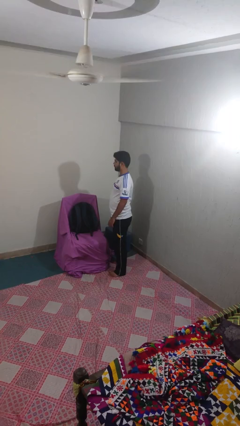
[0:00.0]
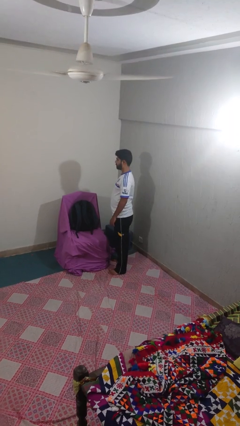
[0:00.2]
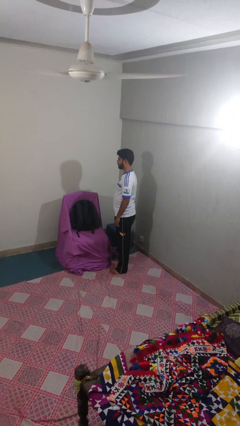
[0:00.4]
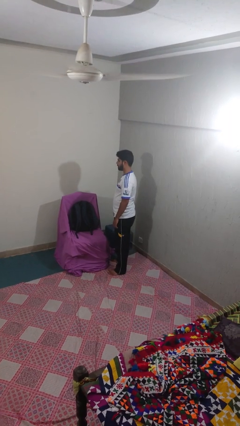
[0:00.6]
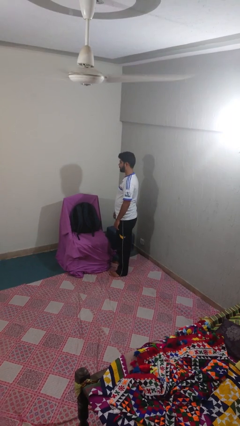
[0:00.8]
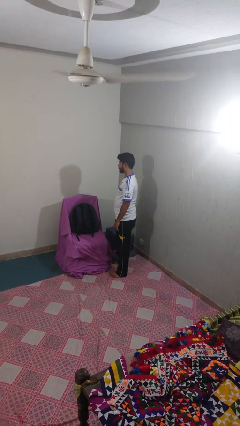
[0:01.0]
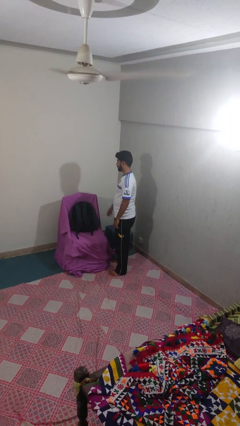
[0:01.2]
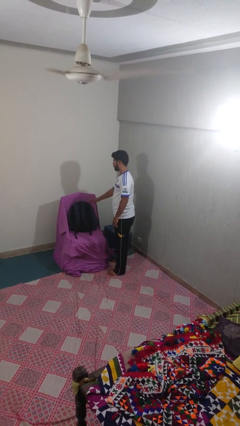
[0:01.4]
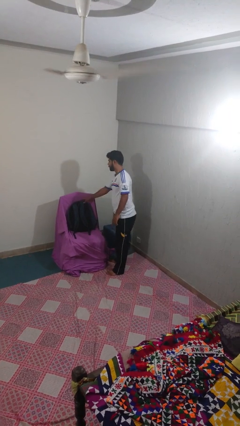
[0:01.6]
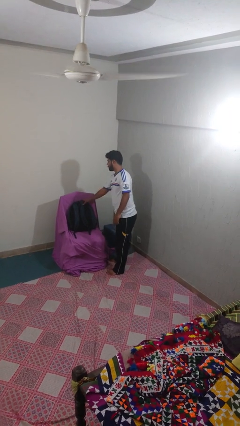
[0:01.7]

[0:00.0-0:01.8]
person picks up object from couch

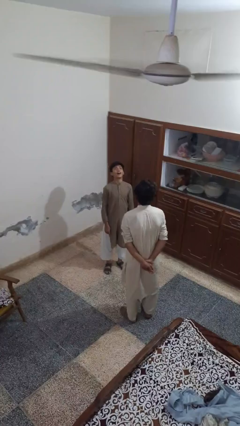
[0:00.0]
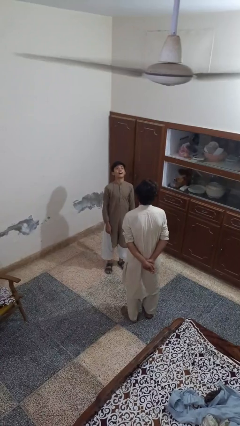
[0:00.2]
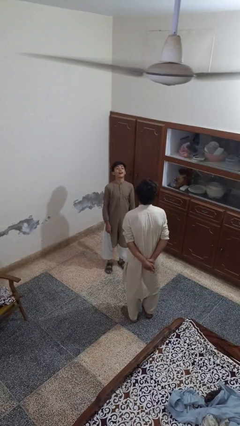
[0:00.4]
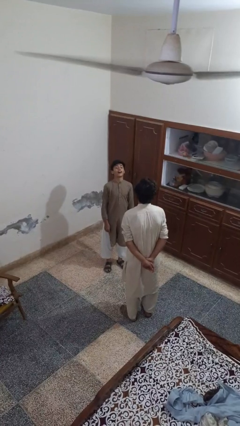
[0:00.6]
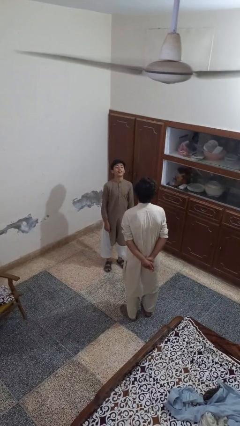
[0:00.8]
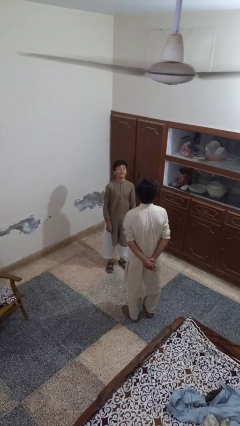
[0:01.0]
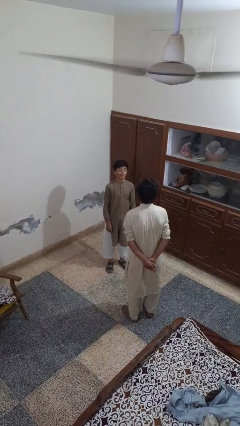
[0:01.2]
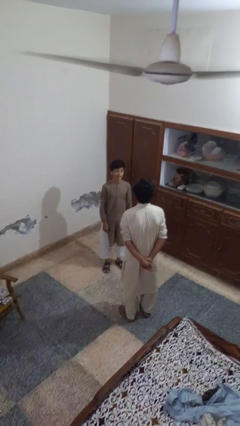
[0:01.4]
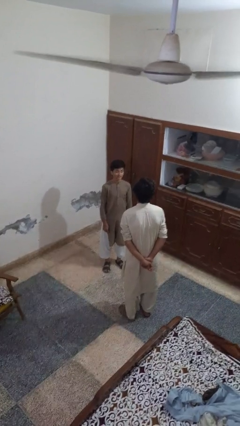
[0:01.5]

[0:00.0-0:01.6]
person laughs with person

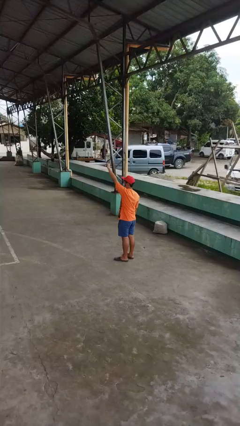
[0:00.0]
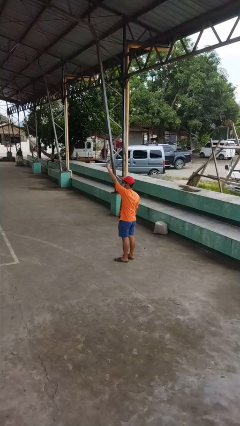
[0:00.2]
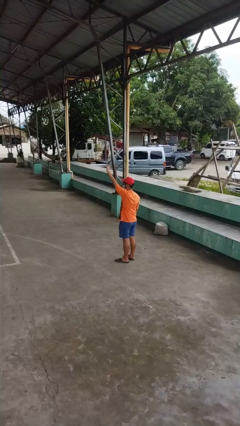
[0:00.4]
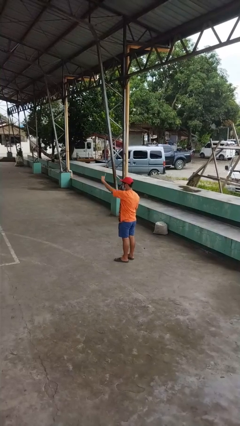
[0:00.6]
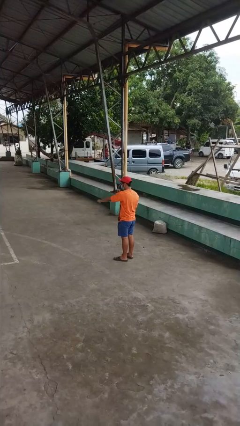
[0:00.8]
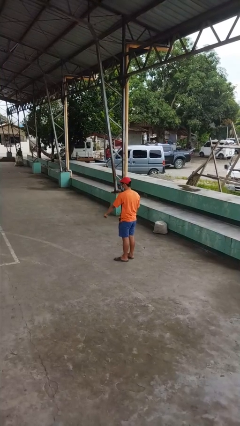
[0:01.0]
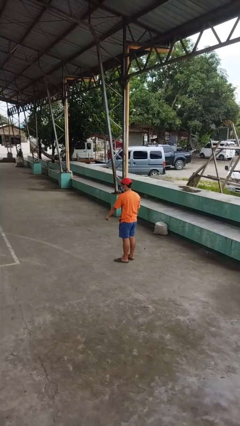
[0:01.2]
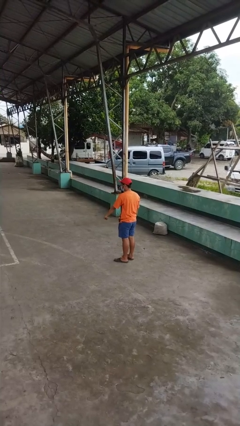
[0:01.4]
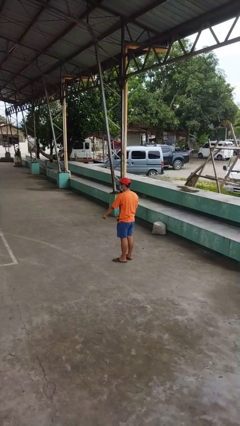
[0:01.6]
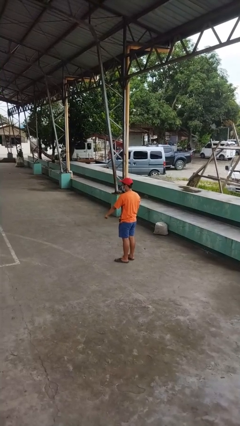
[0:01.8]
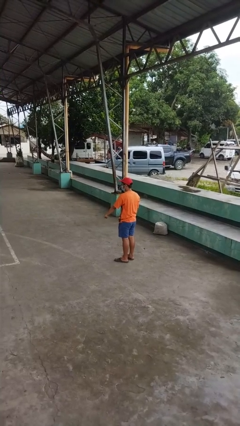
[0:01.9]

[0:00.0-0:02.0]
person gestures swipe down

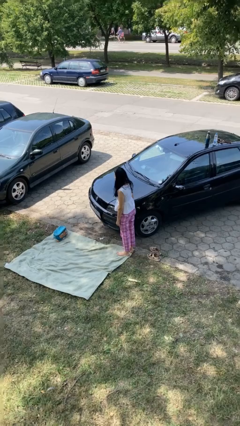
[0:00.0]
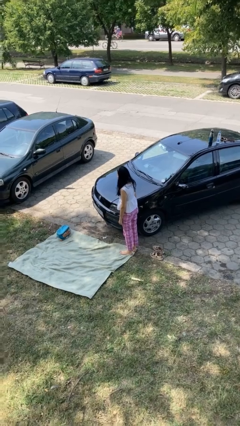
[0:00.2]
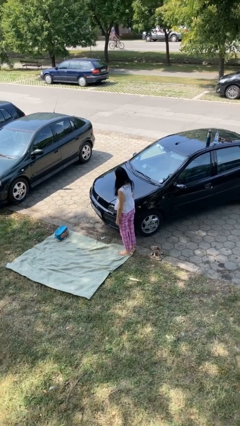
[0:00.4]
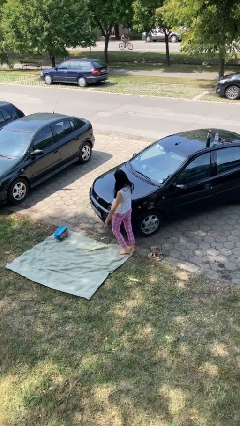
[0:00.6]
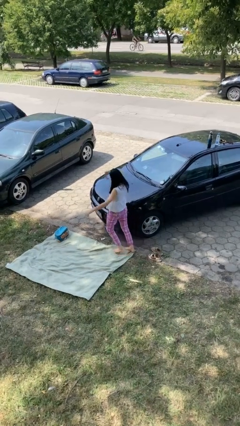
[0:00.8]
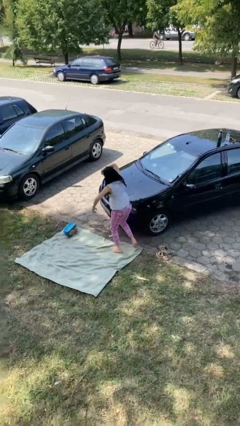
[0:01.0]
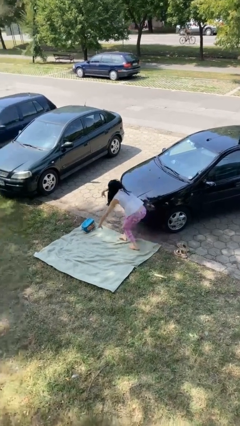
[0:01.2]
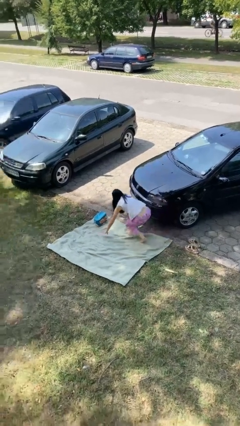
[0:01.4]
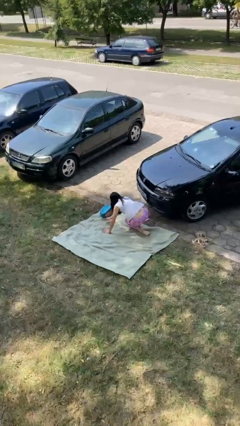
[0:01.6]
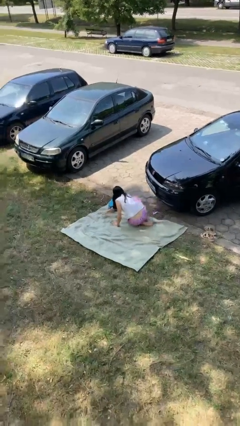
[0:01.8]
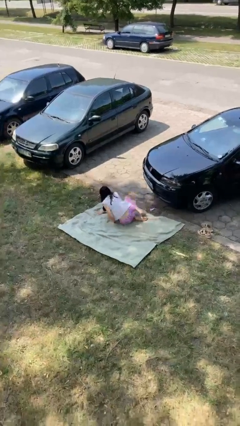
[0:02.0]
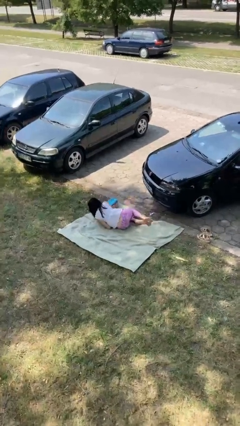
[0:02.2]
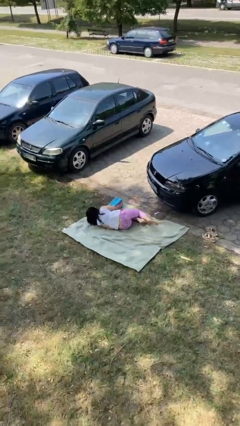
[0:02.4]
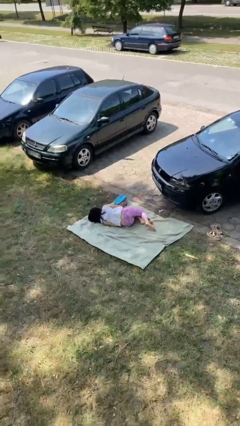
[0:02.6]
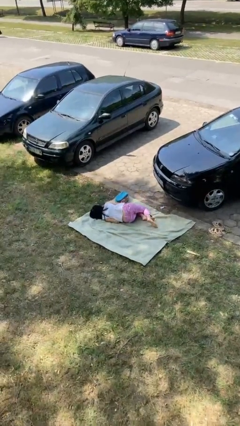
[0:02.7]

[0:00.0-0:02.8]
person trips on object on floor

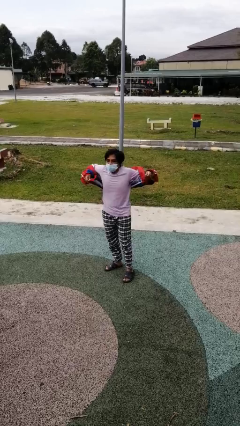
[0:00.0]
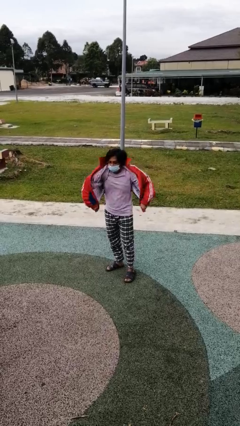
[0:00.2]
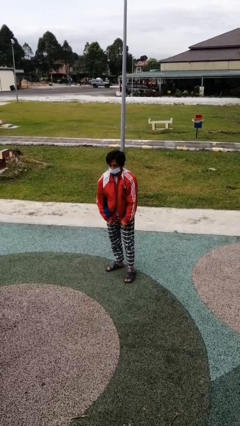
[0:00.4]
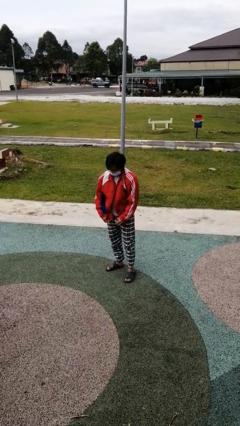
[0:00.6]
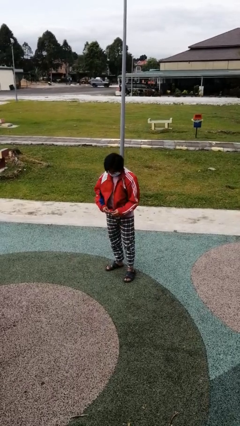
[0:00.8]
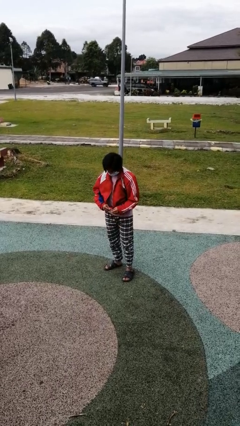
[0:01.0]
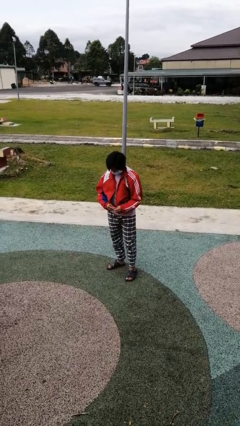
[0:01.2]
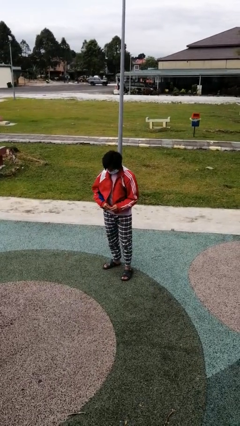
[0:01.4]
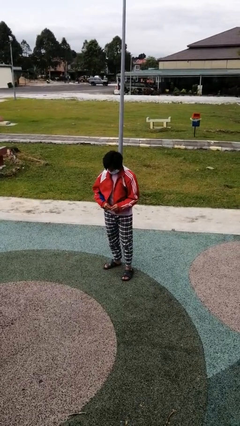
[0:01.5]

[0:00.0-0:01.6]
person puts on jacket

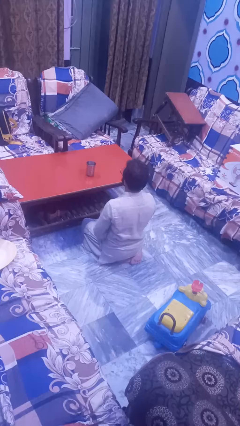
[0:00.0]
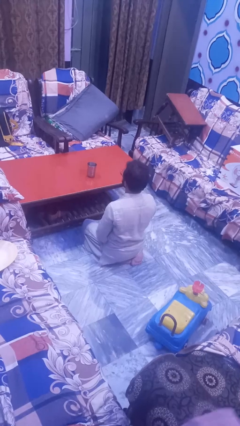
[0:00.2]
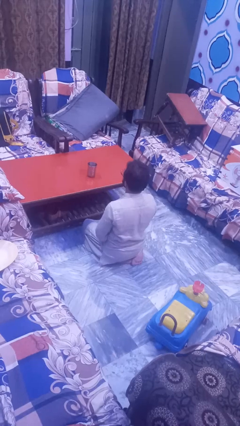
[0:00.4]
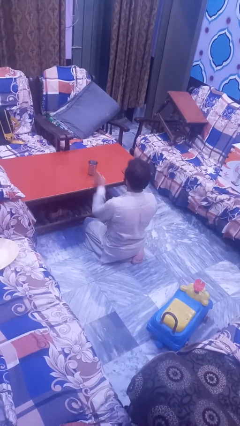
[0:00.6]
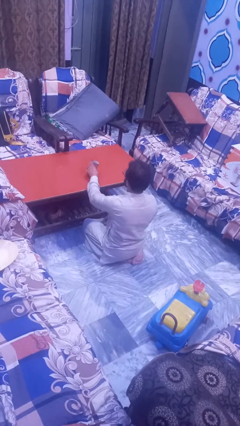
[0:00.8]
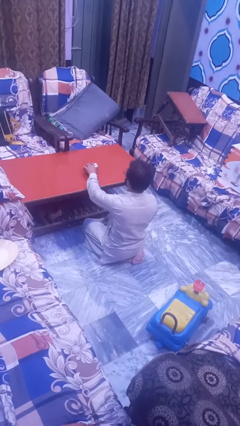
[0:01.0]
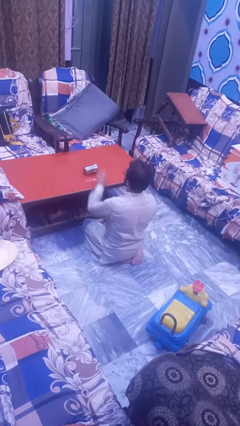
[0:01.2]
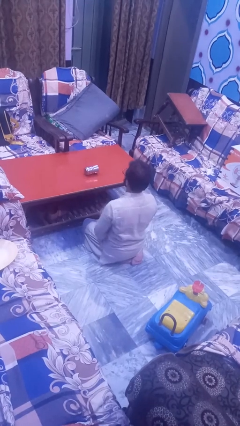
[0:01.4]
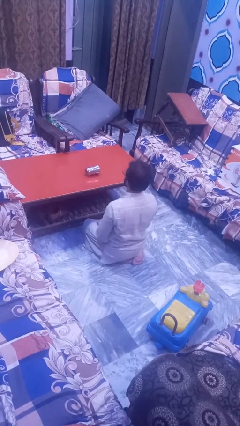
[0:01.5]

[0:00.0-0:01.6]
person knocks over glass

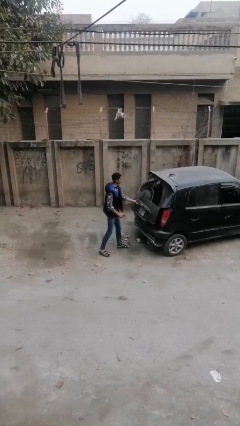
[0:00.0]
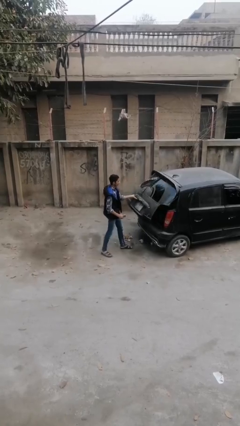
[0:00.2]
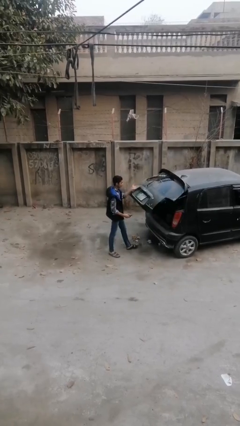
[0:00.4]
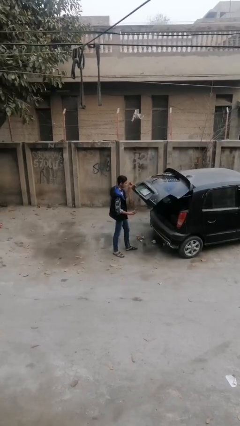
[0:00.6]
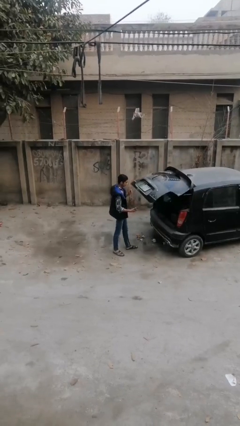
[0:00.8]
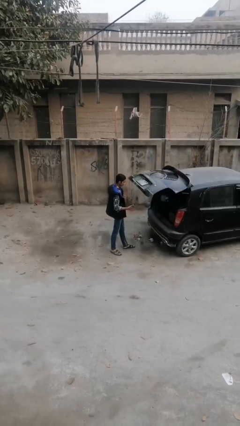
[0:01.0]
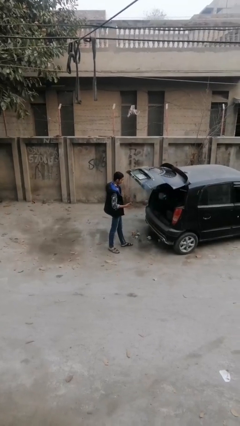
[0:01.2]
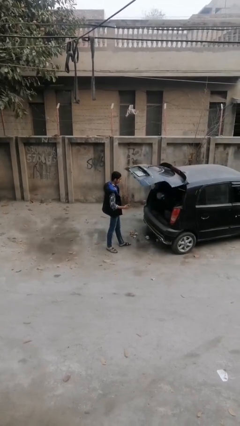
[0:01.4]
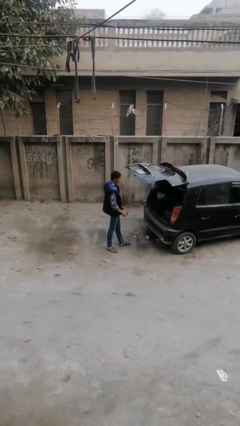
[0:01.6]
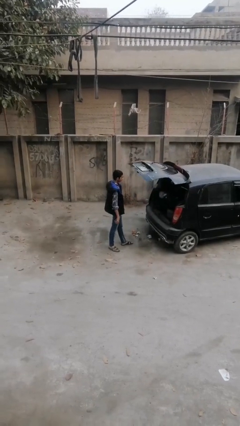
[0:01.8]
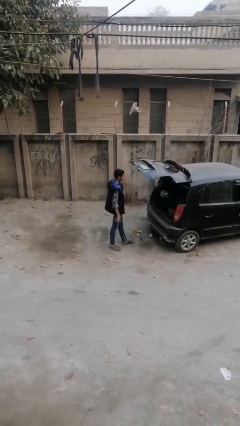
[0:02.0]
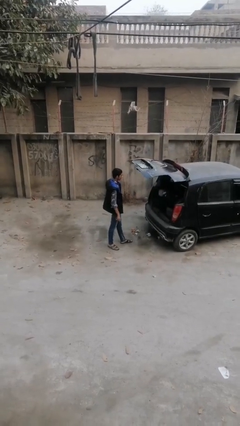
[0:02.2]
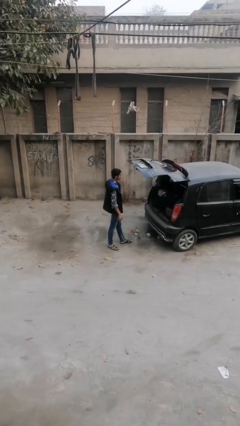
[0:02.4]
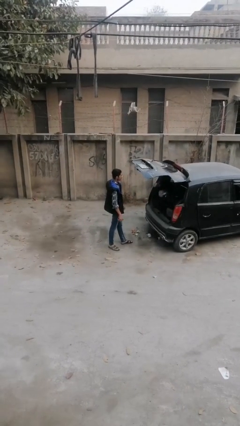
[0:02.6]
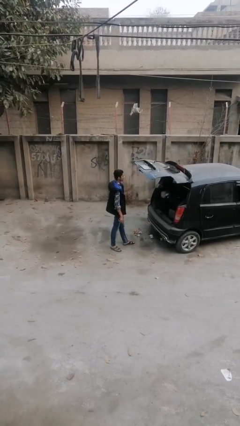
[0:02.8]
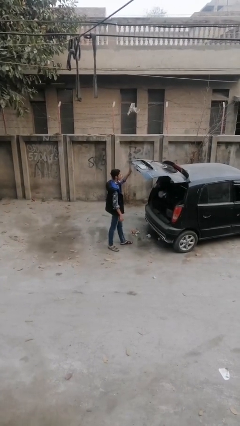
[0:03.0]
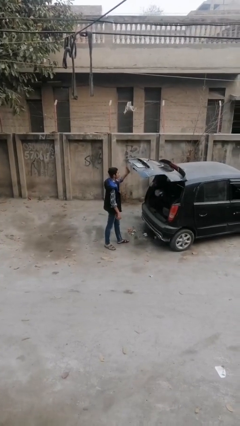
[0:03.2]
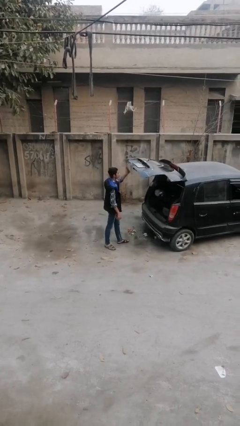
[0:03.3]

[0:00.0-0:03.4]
person opens car trunk

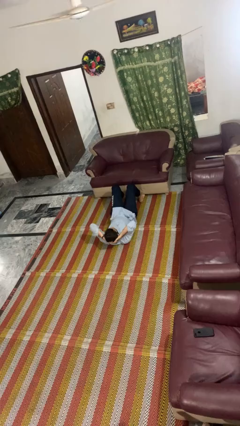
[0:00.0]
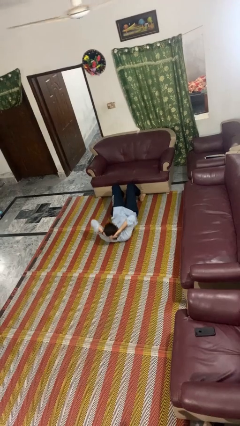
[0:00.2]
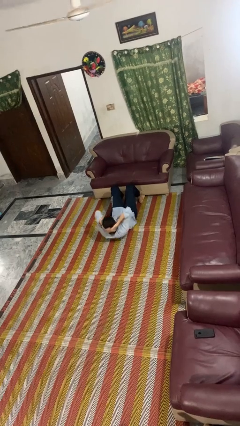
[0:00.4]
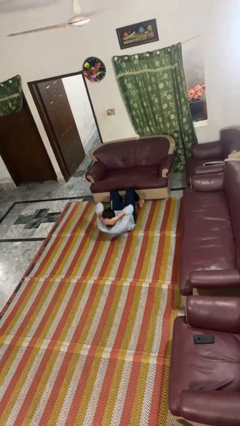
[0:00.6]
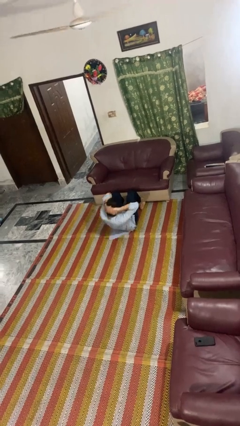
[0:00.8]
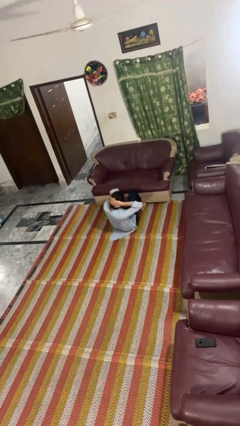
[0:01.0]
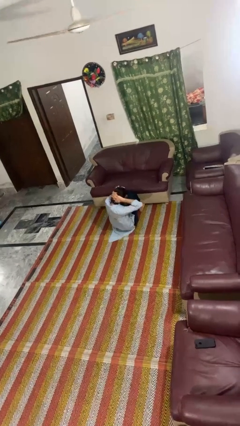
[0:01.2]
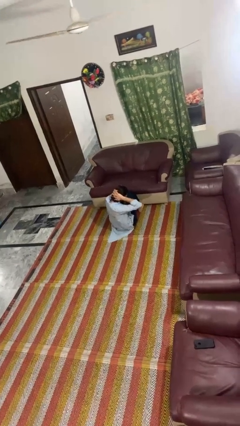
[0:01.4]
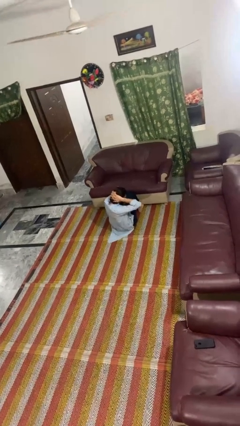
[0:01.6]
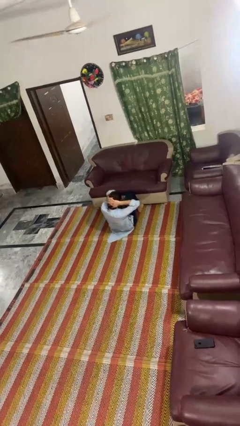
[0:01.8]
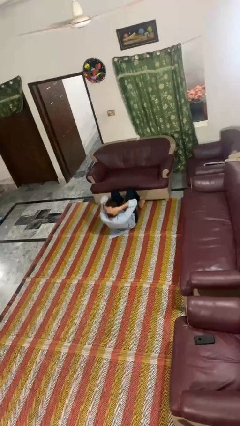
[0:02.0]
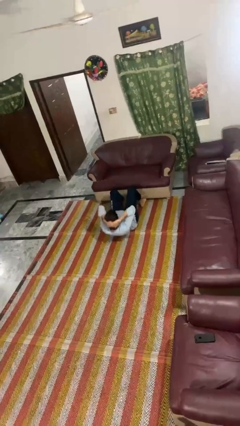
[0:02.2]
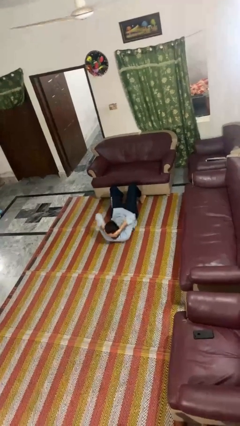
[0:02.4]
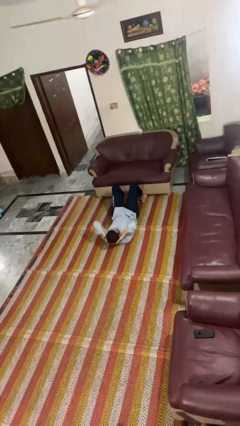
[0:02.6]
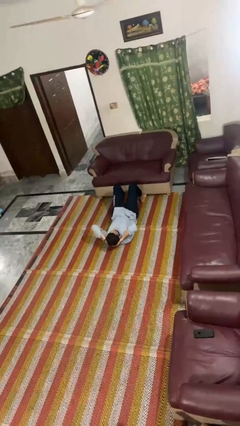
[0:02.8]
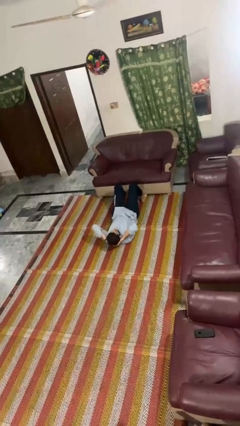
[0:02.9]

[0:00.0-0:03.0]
person exercises with situp
